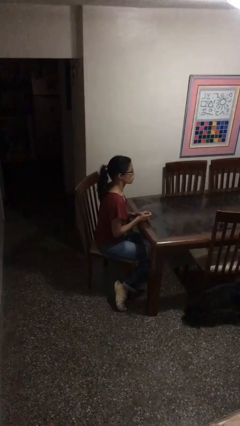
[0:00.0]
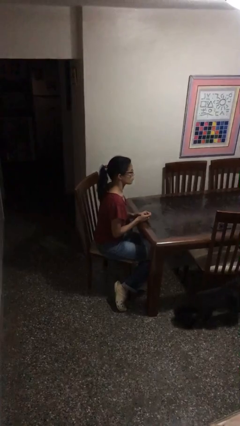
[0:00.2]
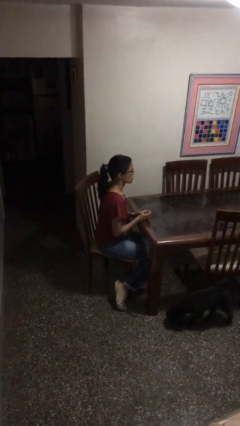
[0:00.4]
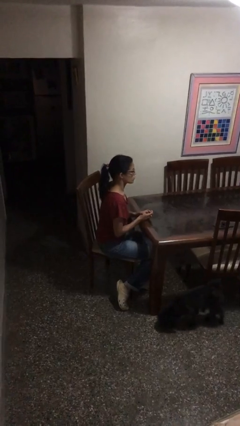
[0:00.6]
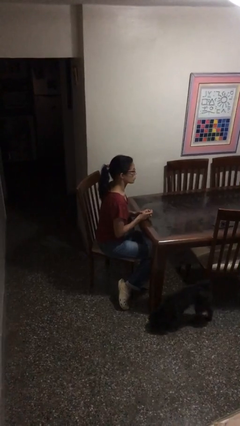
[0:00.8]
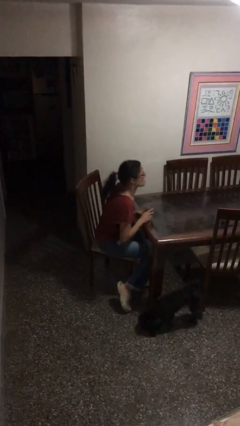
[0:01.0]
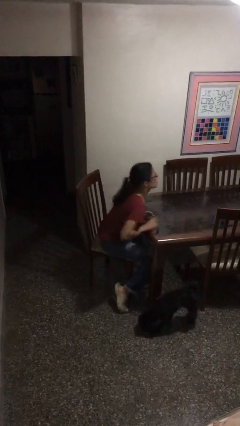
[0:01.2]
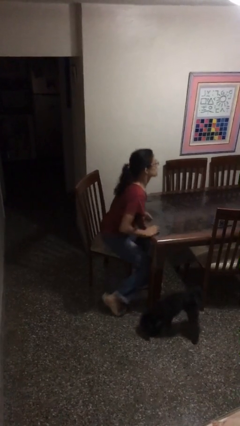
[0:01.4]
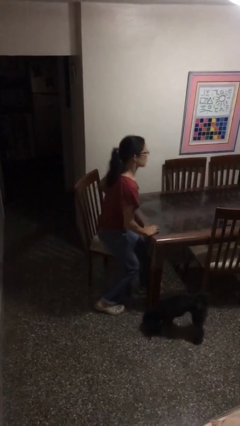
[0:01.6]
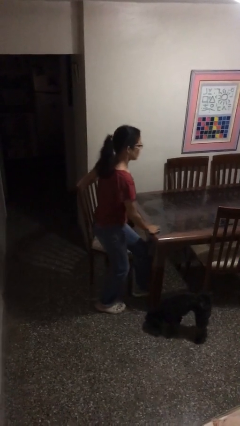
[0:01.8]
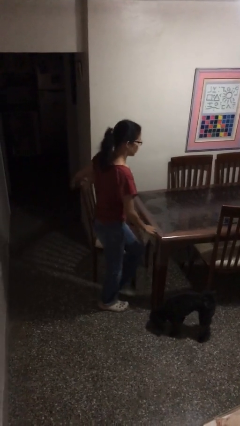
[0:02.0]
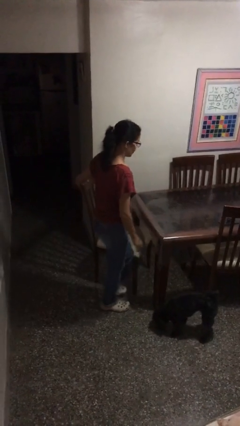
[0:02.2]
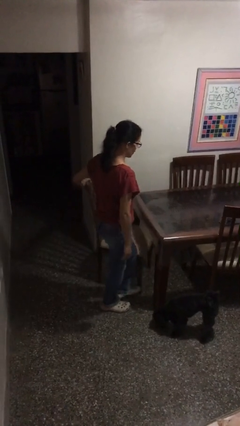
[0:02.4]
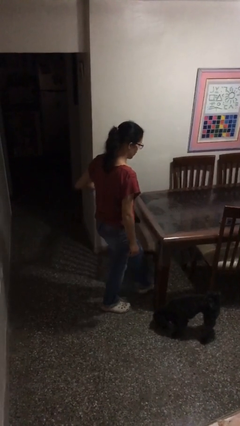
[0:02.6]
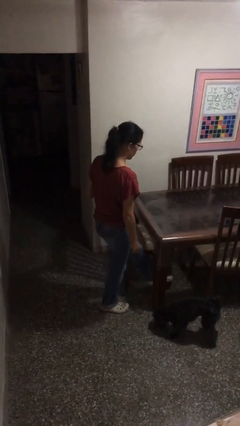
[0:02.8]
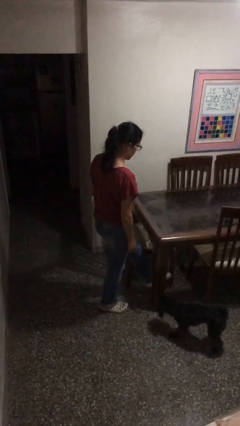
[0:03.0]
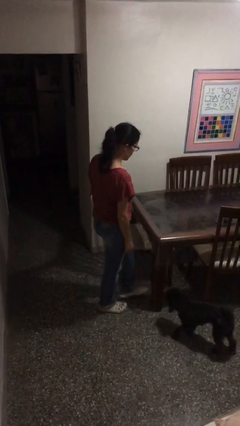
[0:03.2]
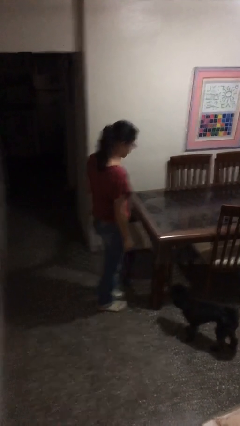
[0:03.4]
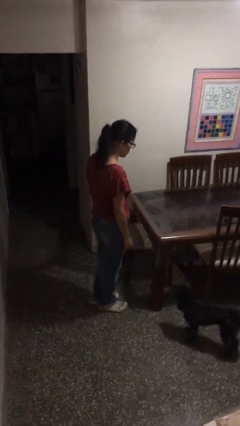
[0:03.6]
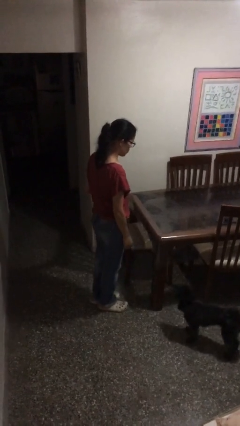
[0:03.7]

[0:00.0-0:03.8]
person stands up

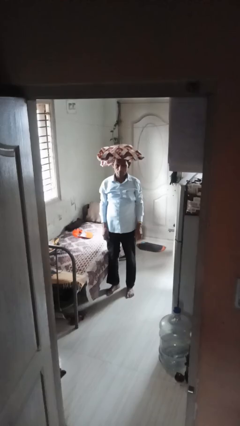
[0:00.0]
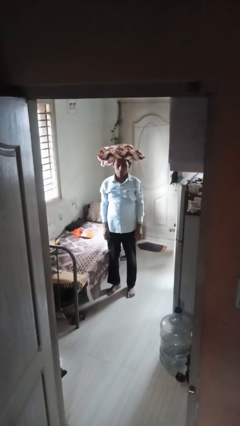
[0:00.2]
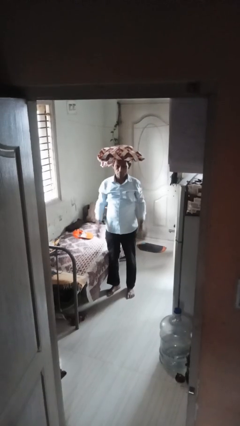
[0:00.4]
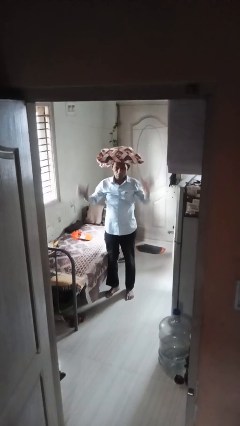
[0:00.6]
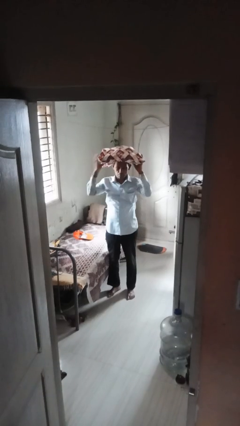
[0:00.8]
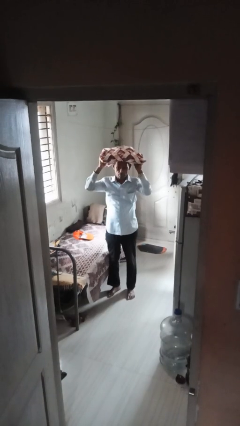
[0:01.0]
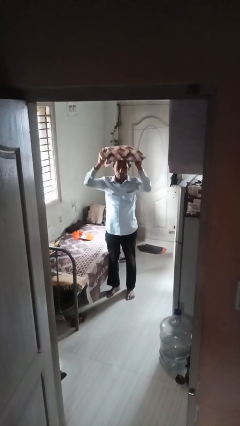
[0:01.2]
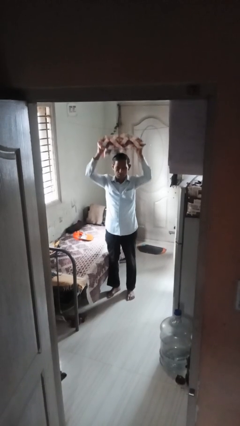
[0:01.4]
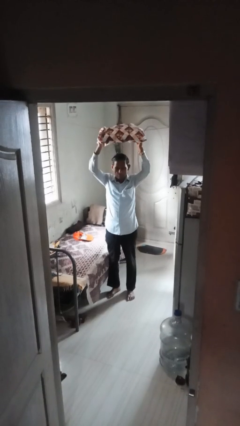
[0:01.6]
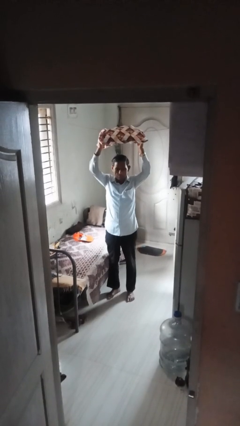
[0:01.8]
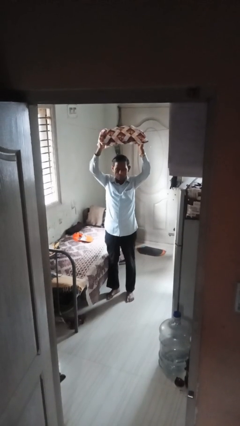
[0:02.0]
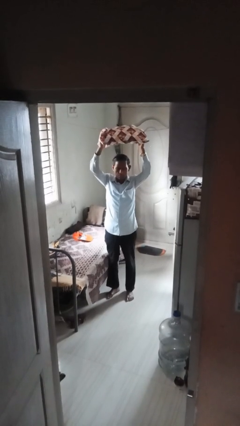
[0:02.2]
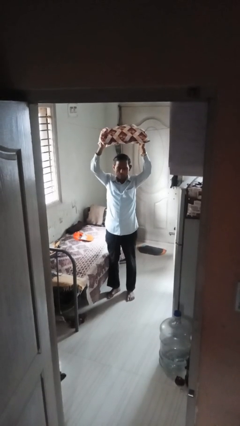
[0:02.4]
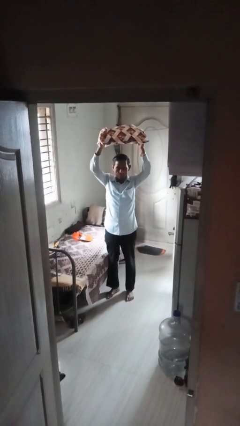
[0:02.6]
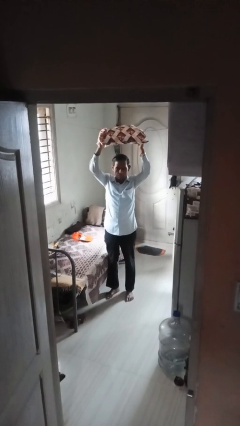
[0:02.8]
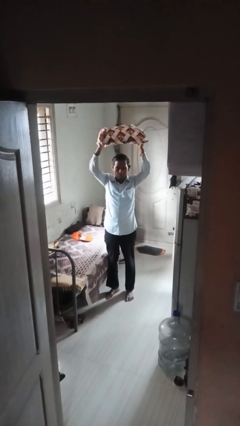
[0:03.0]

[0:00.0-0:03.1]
person holds object above head

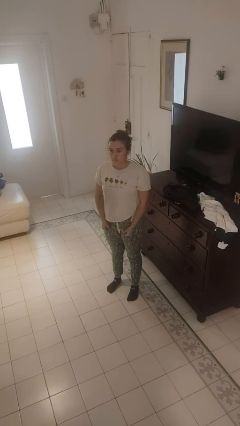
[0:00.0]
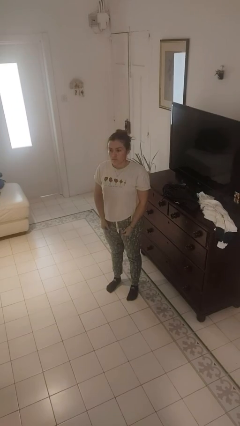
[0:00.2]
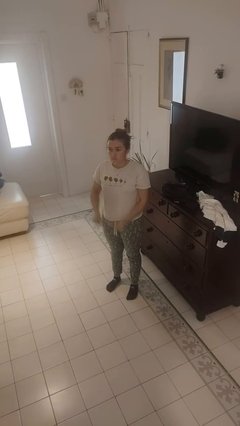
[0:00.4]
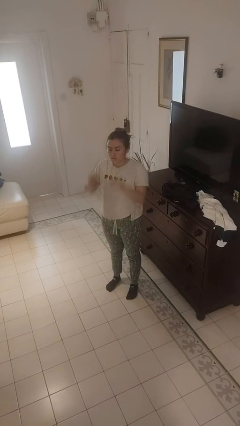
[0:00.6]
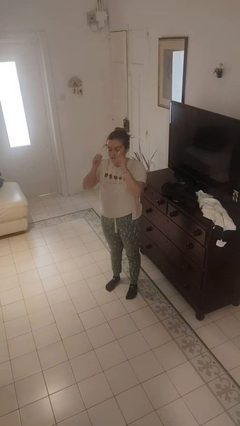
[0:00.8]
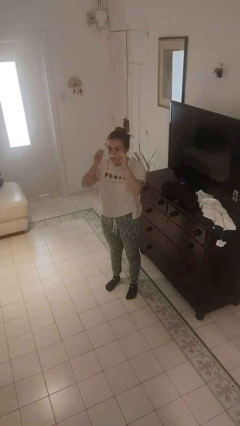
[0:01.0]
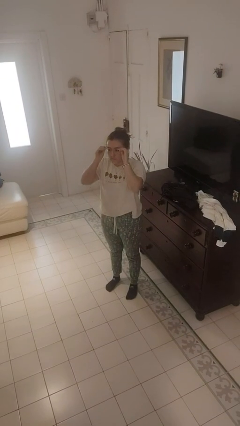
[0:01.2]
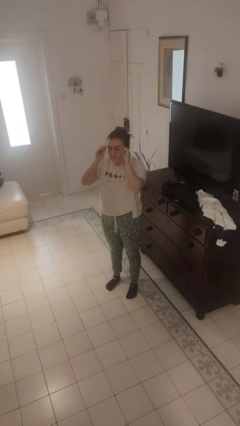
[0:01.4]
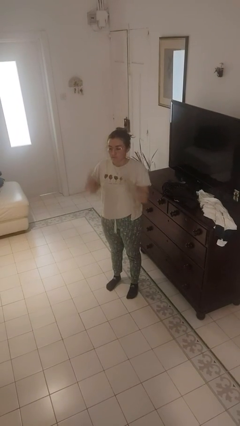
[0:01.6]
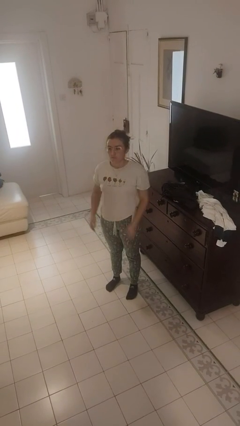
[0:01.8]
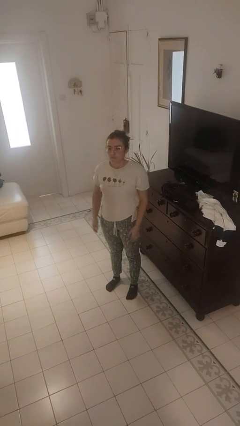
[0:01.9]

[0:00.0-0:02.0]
person puts on glasses

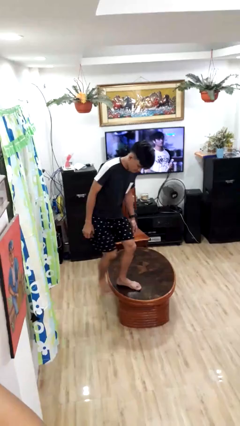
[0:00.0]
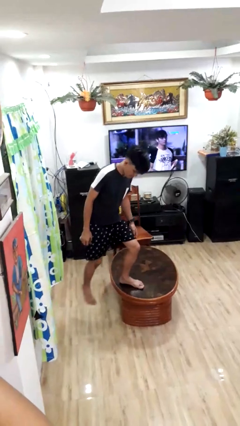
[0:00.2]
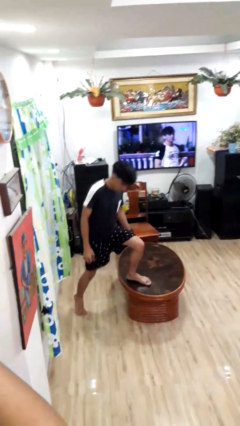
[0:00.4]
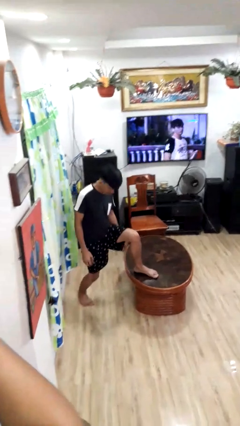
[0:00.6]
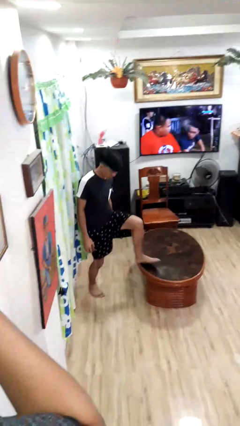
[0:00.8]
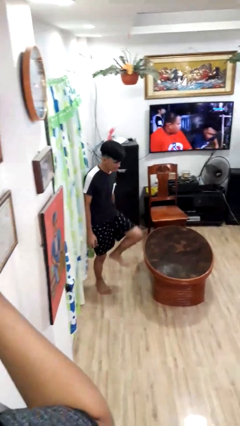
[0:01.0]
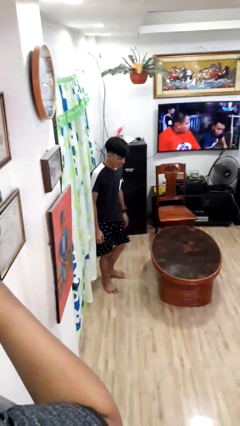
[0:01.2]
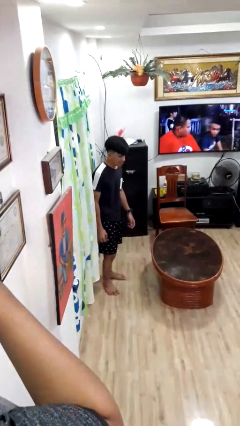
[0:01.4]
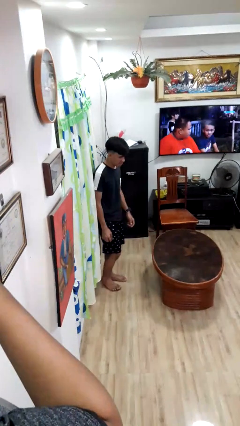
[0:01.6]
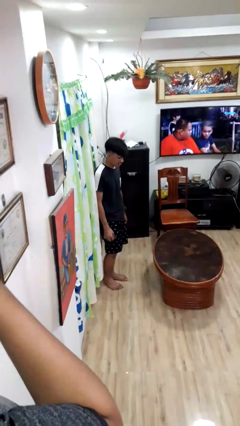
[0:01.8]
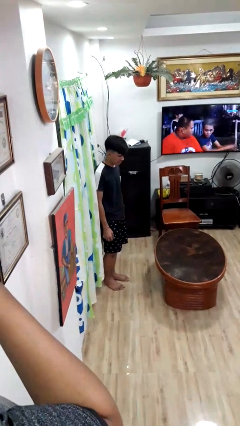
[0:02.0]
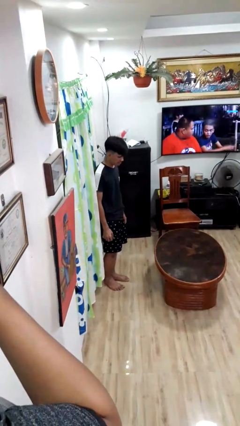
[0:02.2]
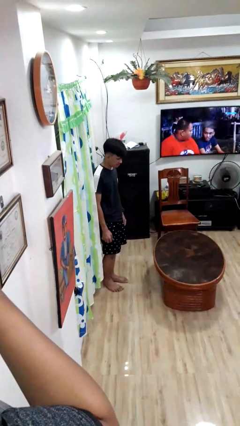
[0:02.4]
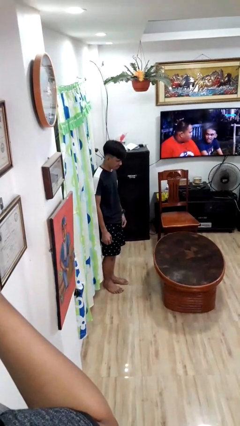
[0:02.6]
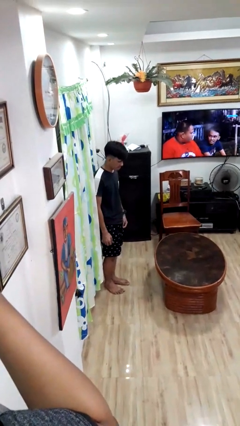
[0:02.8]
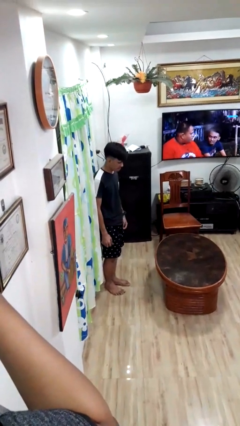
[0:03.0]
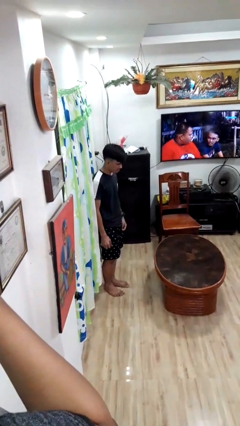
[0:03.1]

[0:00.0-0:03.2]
person climbs off table

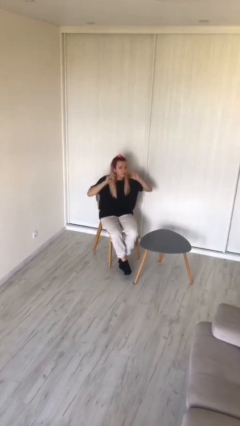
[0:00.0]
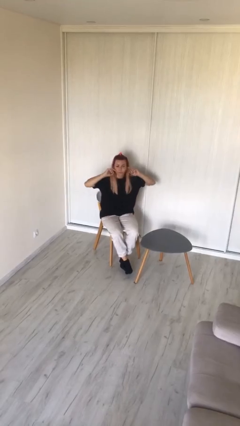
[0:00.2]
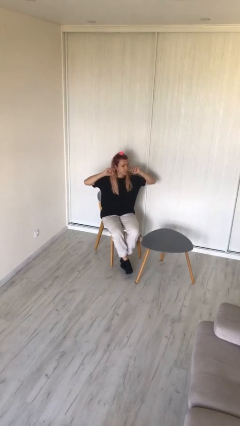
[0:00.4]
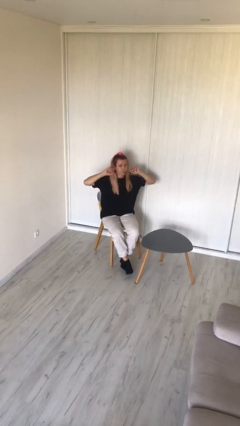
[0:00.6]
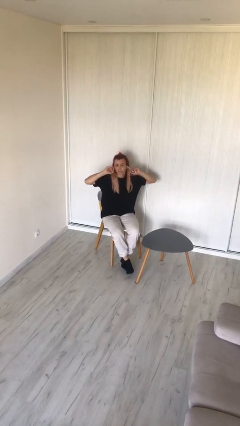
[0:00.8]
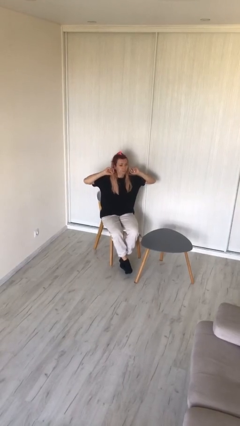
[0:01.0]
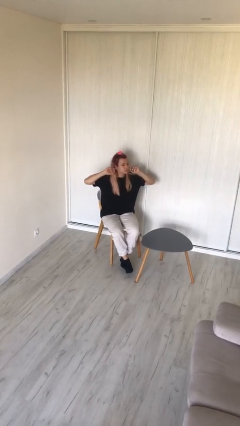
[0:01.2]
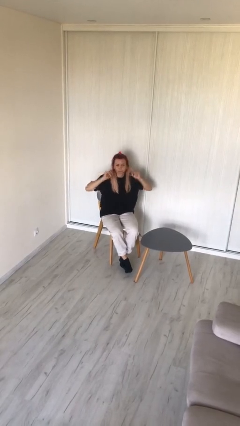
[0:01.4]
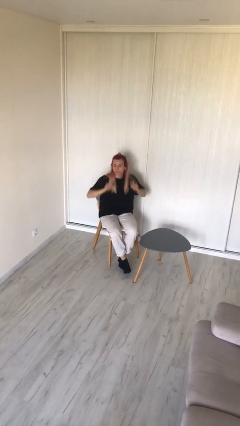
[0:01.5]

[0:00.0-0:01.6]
person puts fingers in ear

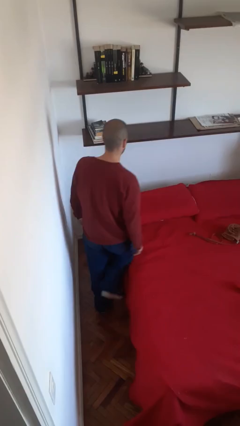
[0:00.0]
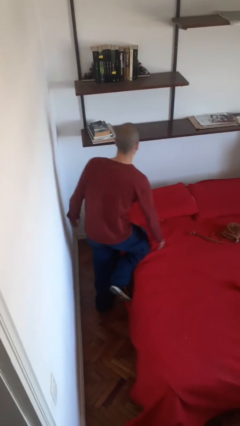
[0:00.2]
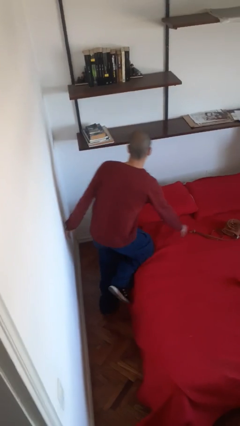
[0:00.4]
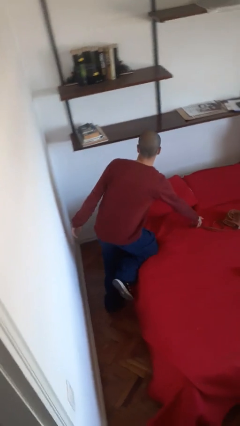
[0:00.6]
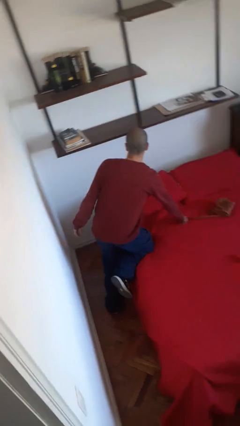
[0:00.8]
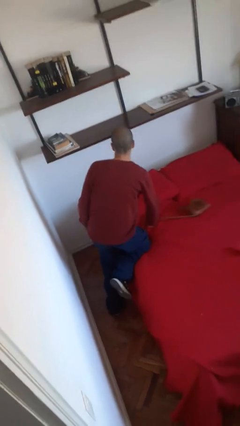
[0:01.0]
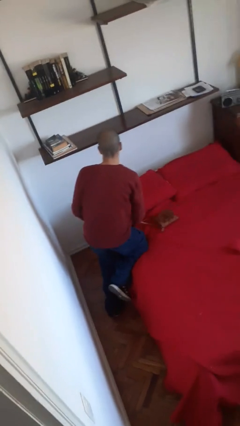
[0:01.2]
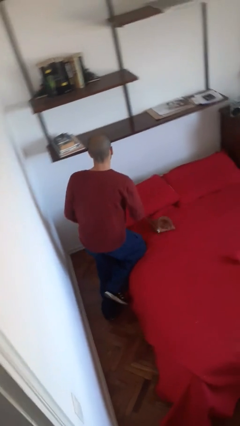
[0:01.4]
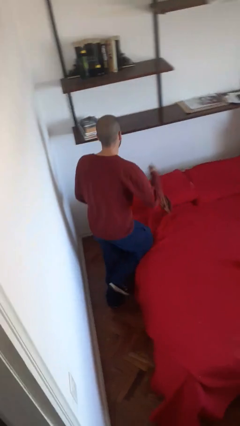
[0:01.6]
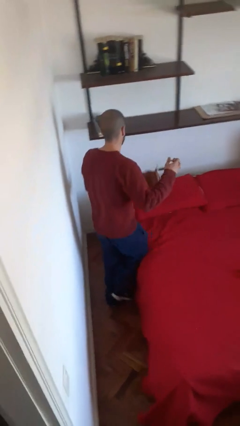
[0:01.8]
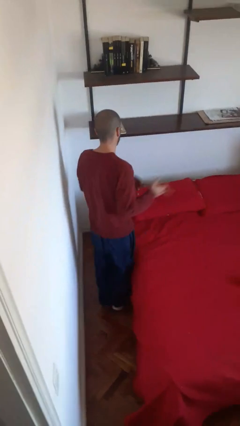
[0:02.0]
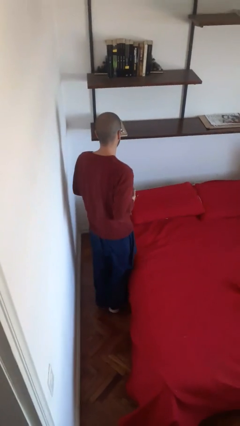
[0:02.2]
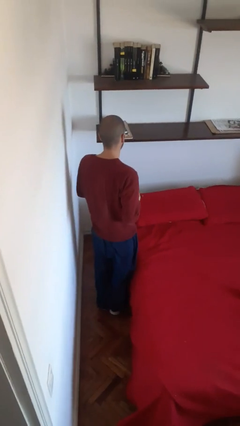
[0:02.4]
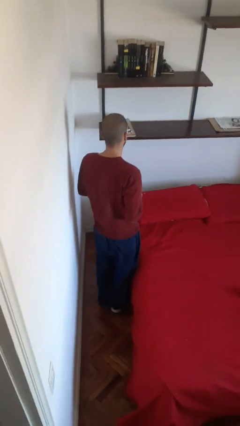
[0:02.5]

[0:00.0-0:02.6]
person picks up object from bed

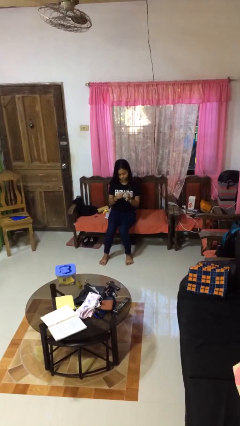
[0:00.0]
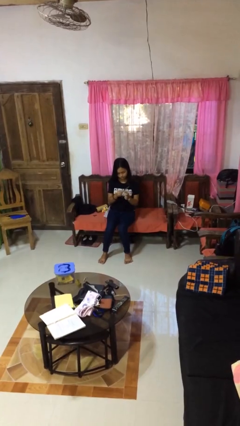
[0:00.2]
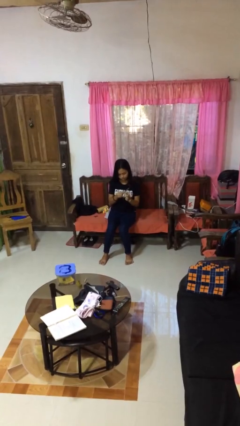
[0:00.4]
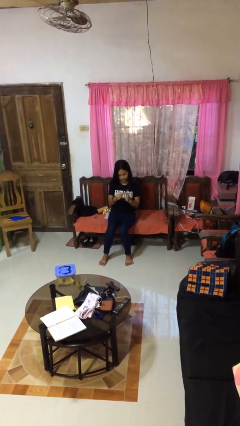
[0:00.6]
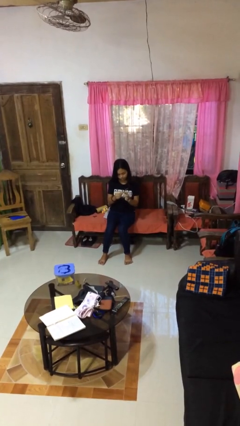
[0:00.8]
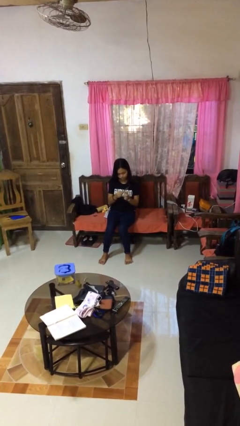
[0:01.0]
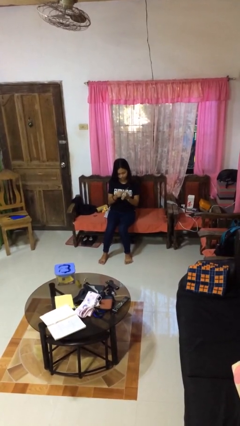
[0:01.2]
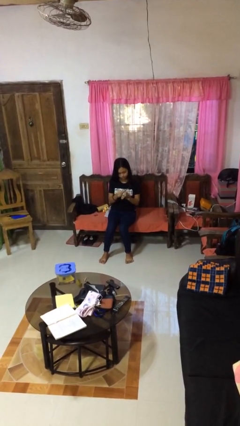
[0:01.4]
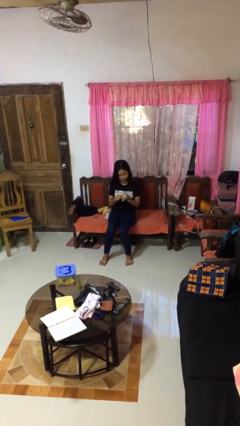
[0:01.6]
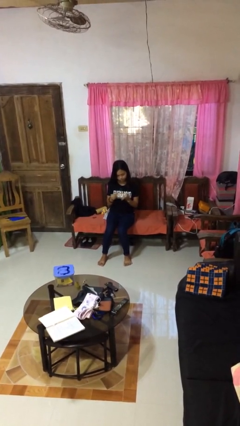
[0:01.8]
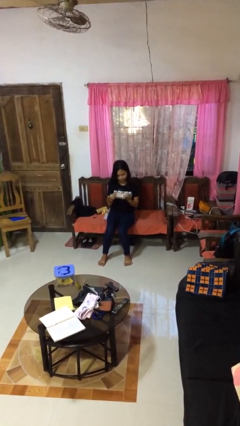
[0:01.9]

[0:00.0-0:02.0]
person files fingernails
